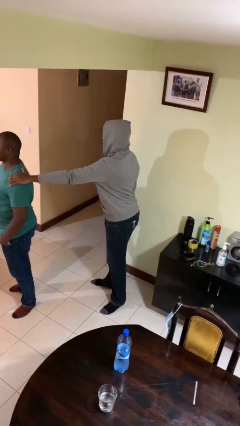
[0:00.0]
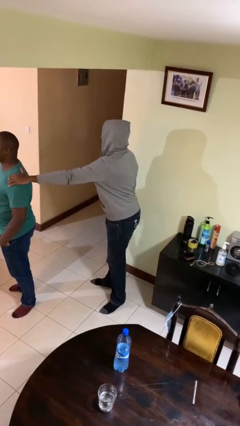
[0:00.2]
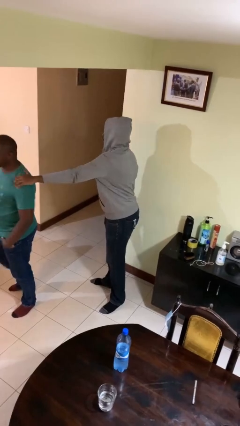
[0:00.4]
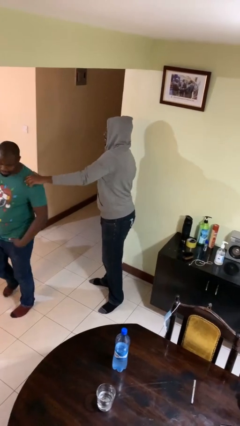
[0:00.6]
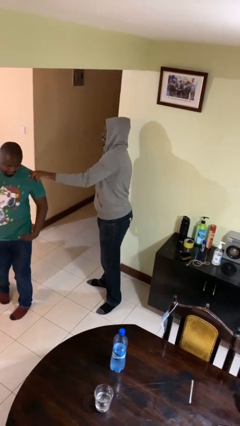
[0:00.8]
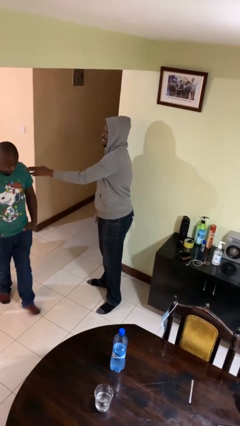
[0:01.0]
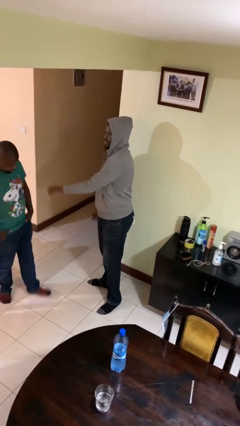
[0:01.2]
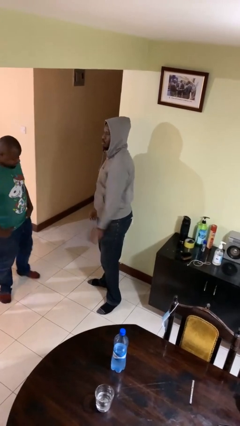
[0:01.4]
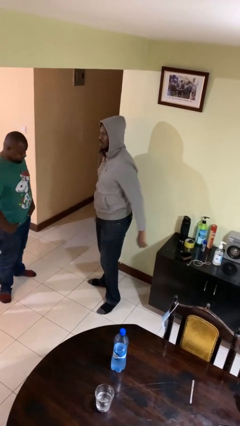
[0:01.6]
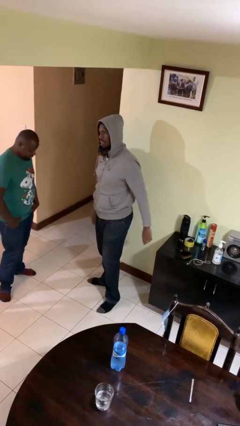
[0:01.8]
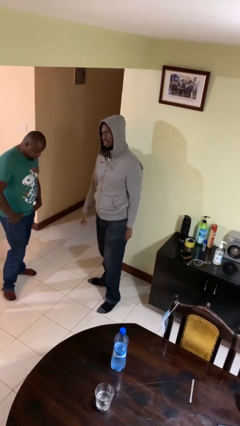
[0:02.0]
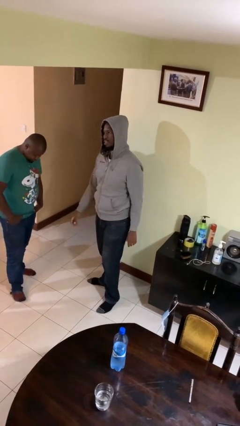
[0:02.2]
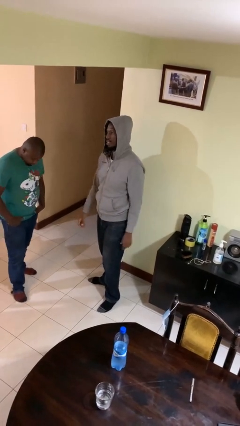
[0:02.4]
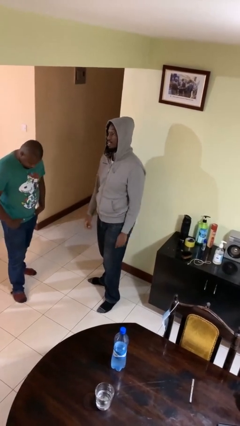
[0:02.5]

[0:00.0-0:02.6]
person spins person around

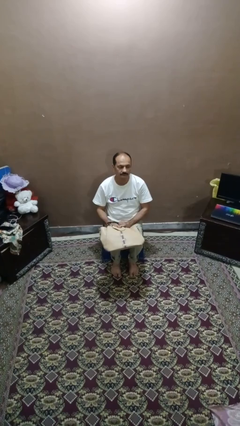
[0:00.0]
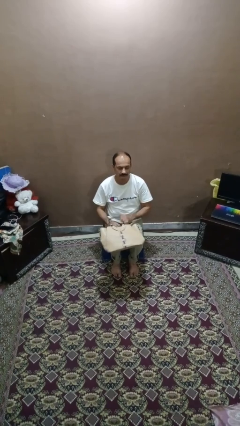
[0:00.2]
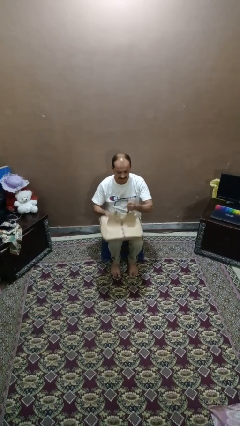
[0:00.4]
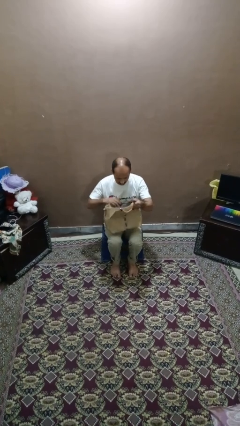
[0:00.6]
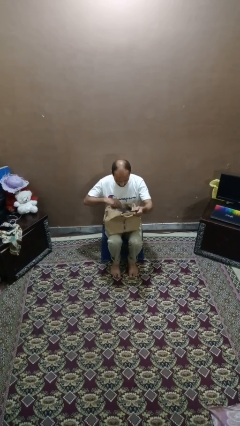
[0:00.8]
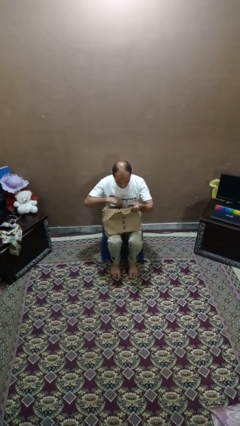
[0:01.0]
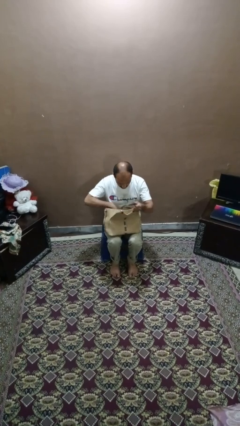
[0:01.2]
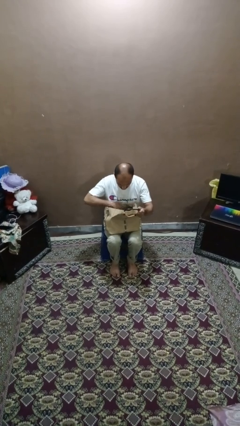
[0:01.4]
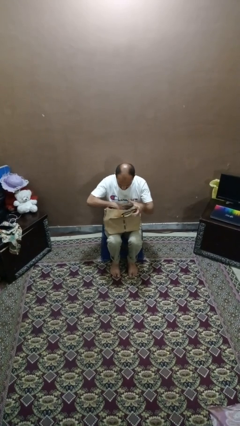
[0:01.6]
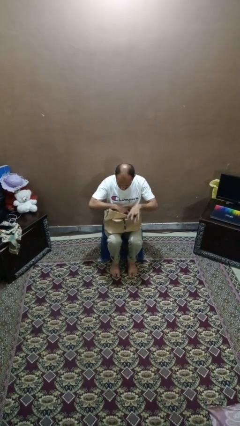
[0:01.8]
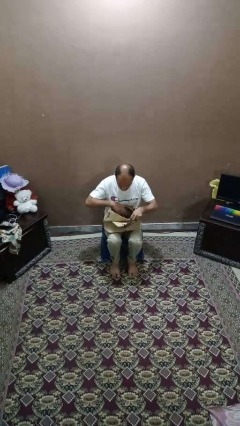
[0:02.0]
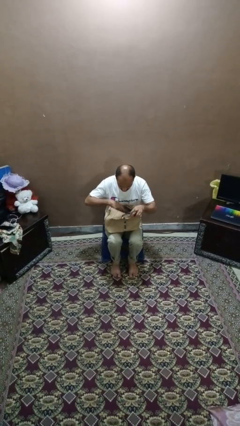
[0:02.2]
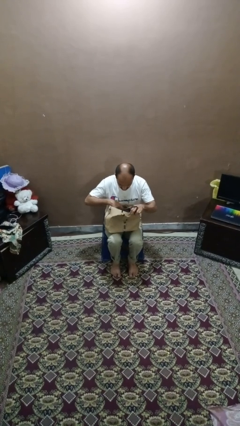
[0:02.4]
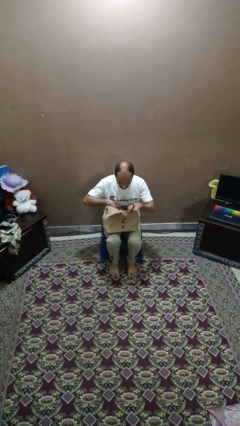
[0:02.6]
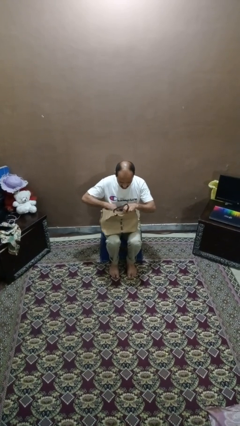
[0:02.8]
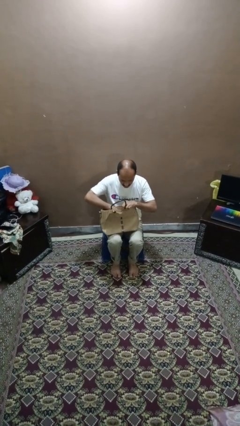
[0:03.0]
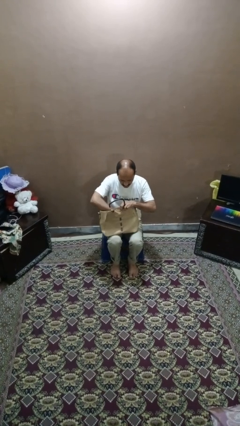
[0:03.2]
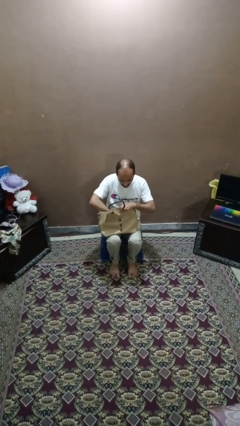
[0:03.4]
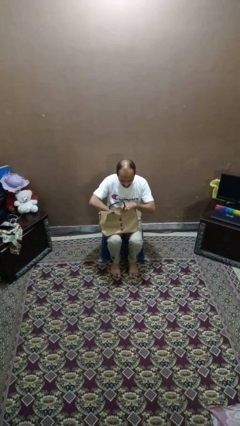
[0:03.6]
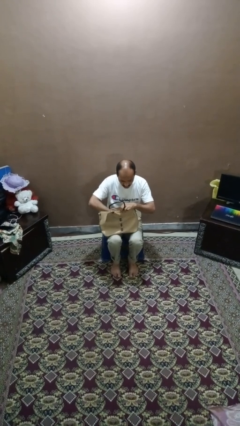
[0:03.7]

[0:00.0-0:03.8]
person searches in purse

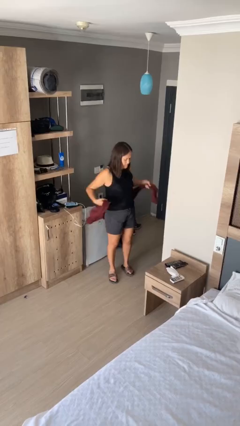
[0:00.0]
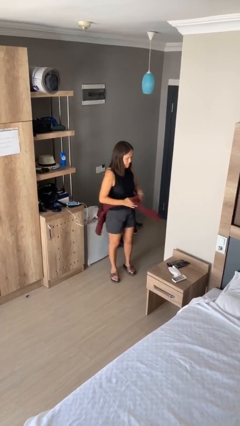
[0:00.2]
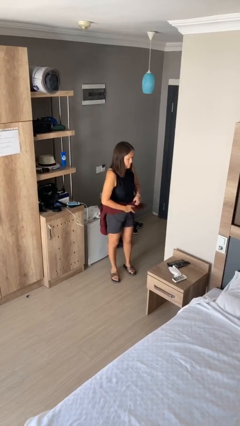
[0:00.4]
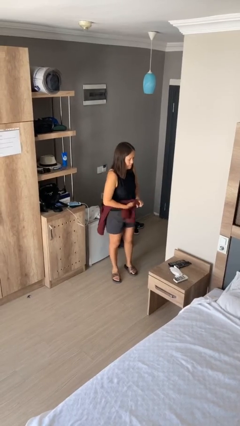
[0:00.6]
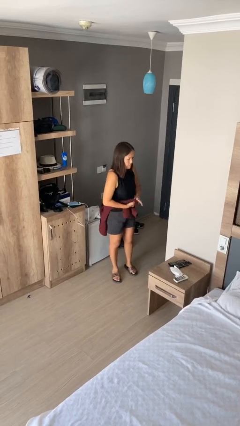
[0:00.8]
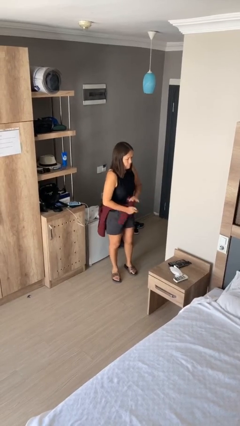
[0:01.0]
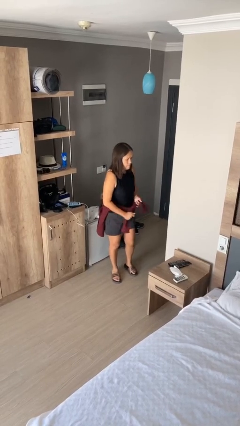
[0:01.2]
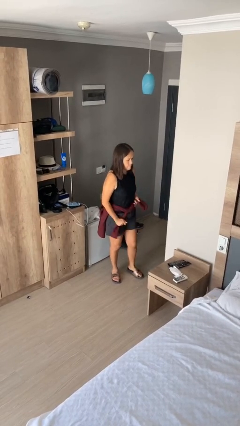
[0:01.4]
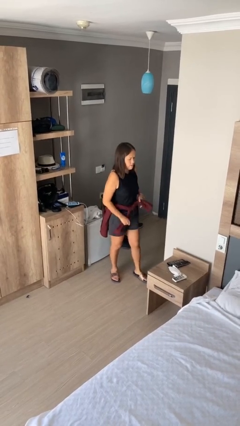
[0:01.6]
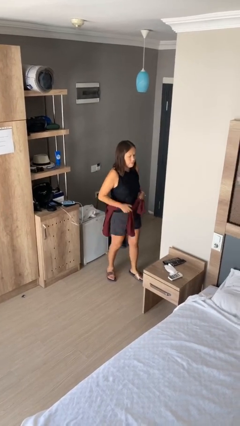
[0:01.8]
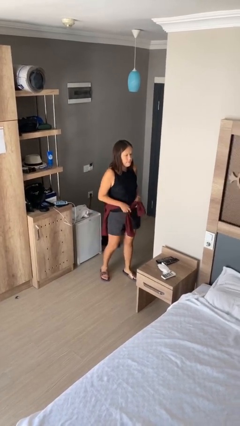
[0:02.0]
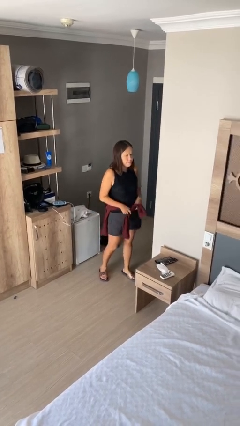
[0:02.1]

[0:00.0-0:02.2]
person ties jacket around waist

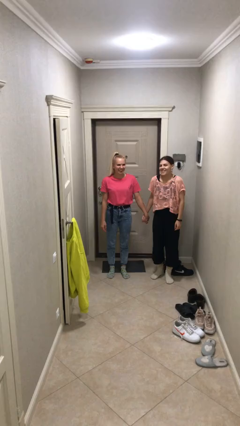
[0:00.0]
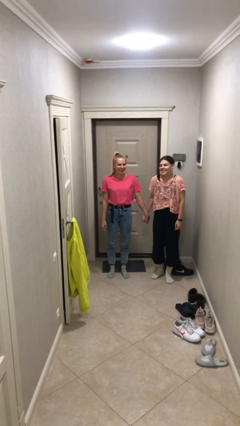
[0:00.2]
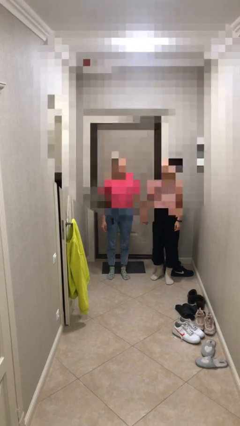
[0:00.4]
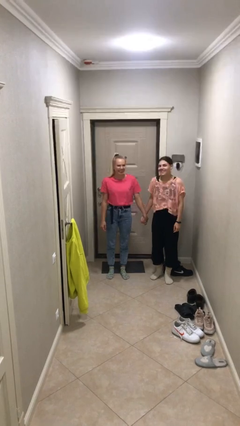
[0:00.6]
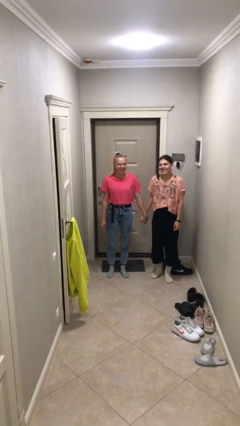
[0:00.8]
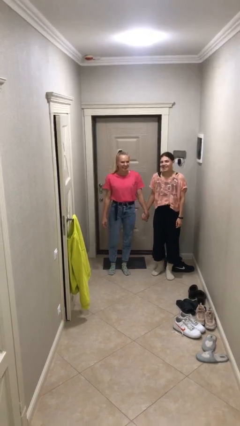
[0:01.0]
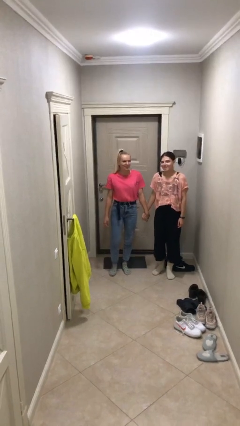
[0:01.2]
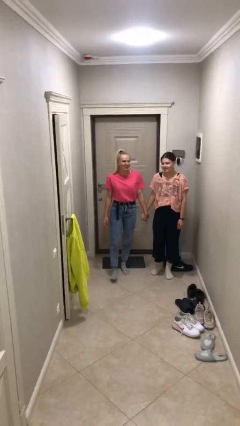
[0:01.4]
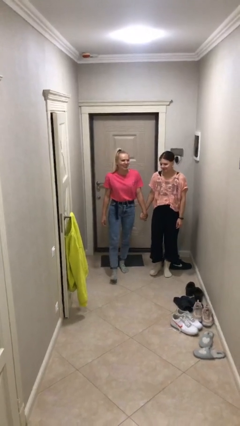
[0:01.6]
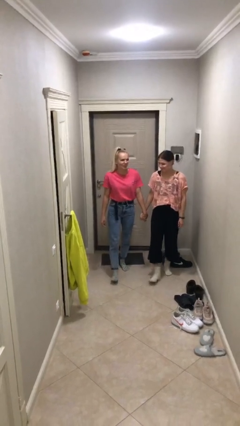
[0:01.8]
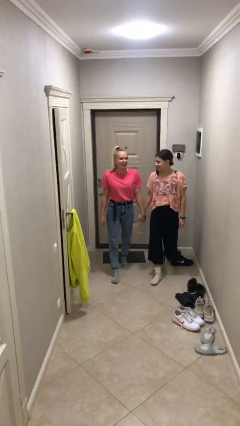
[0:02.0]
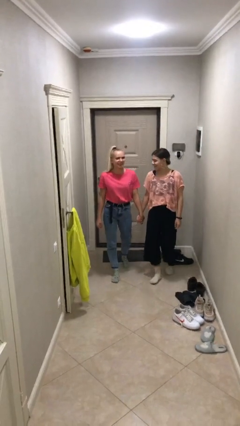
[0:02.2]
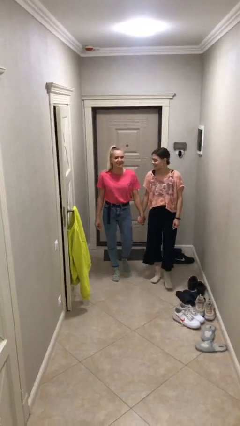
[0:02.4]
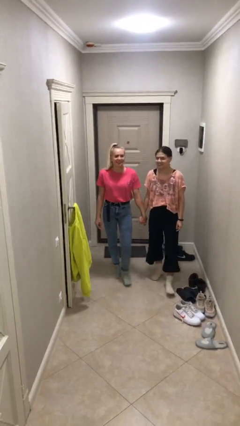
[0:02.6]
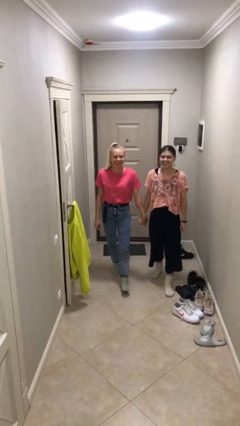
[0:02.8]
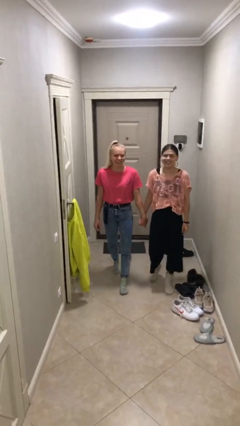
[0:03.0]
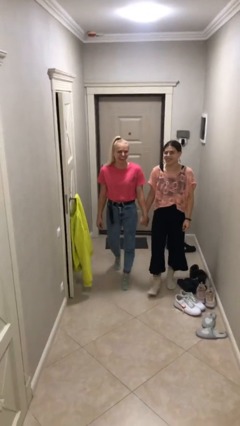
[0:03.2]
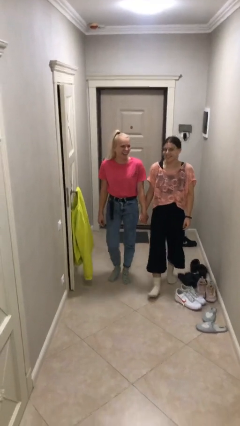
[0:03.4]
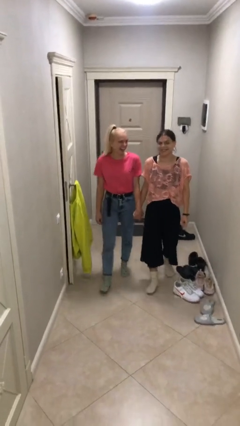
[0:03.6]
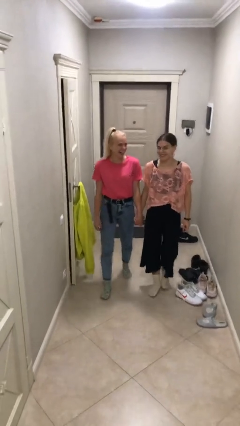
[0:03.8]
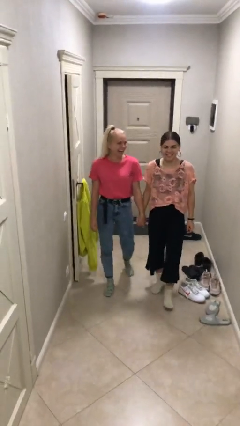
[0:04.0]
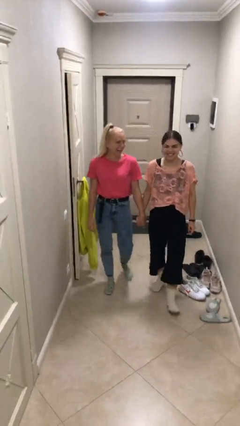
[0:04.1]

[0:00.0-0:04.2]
person holds hand

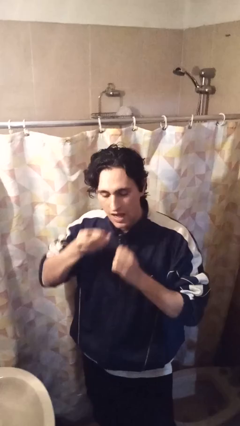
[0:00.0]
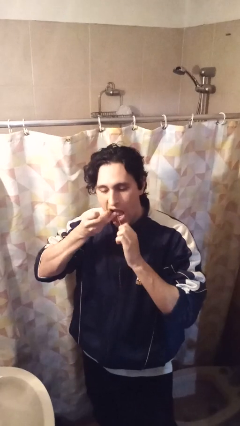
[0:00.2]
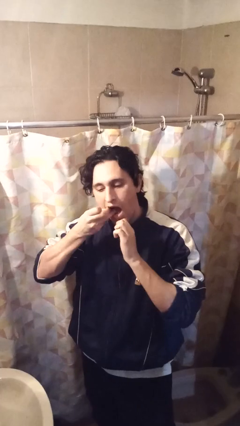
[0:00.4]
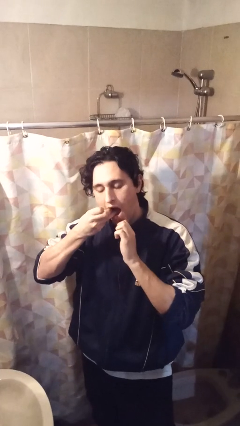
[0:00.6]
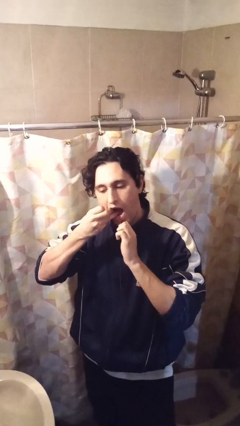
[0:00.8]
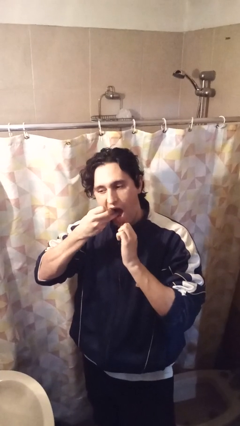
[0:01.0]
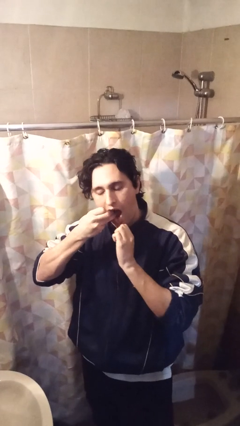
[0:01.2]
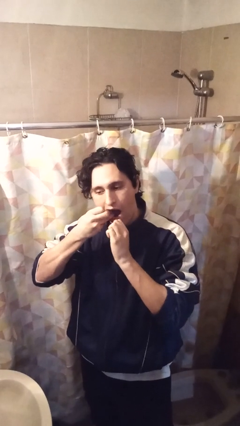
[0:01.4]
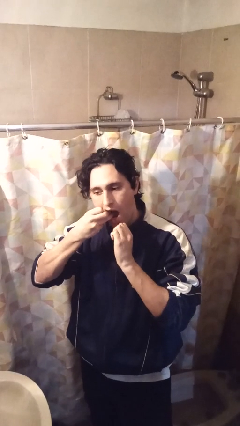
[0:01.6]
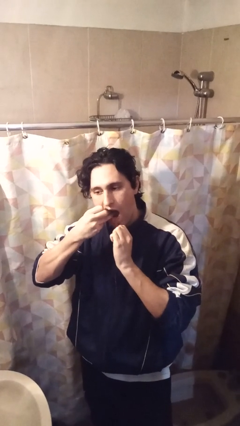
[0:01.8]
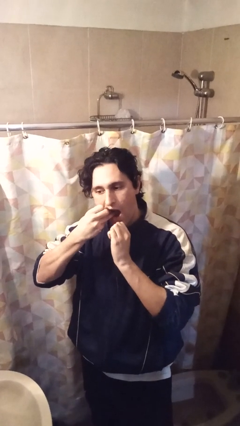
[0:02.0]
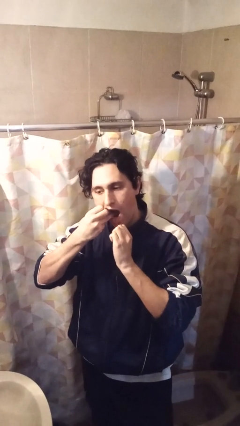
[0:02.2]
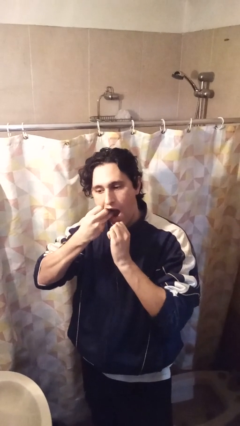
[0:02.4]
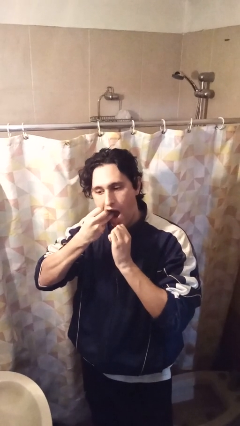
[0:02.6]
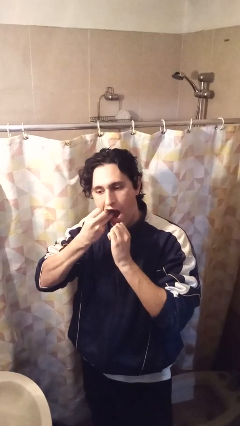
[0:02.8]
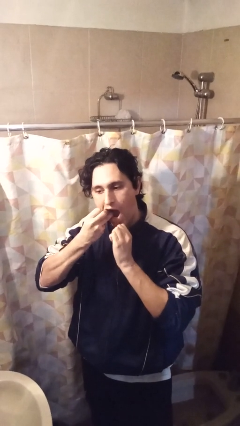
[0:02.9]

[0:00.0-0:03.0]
person flosses

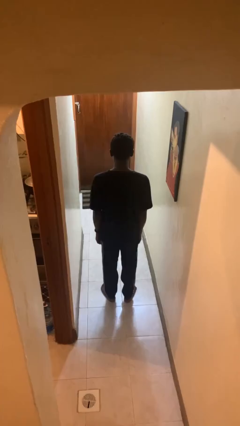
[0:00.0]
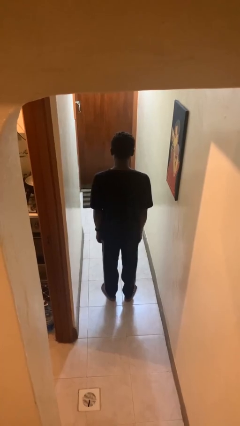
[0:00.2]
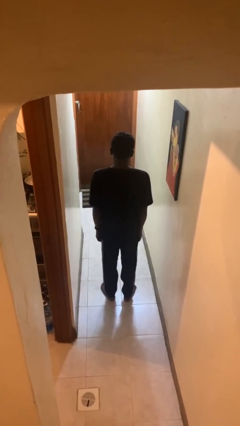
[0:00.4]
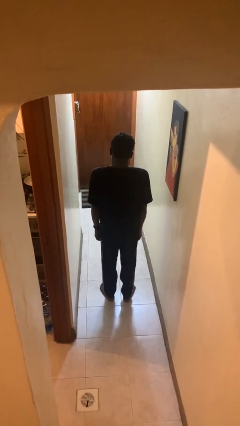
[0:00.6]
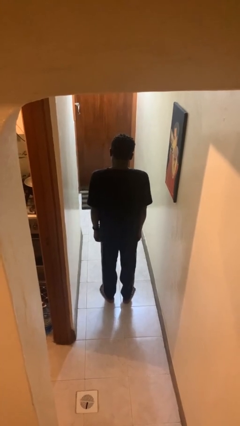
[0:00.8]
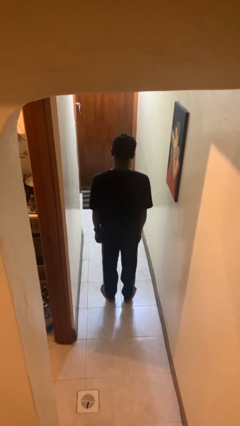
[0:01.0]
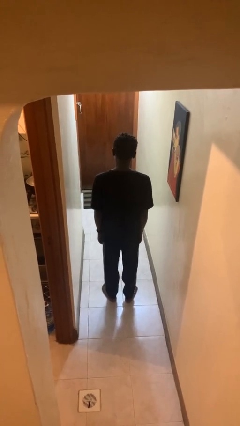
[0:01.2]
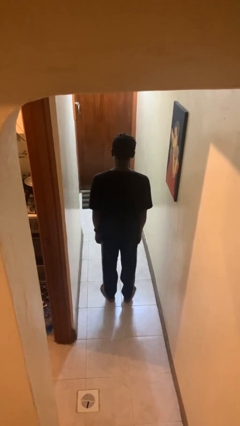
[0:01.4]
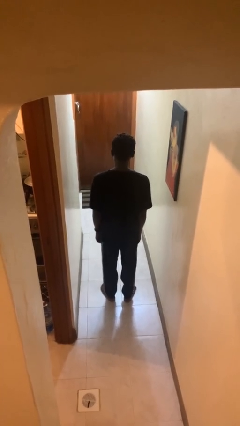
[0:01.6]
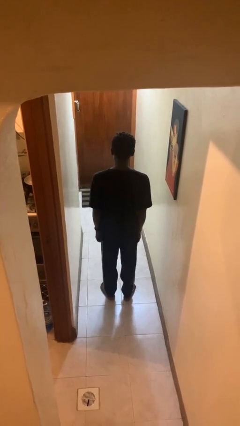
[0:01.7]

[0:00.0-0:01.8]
person shrugs
